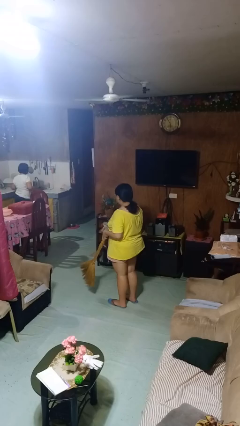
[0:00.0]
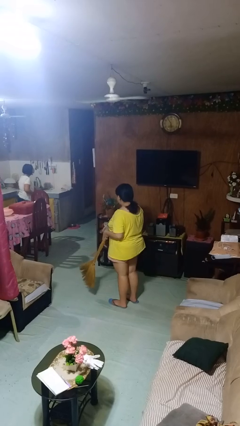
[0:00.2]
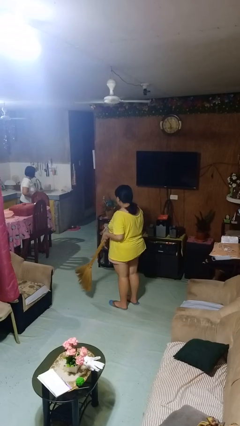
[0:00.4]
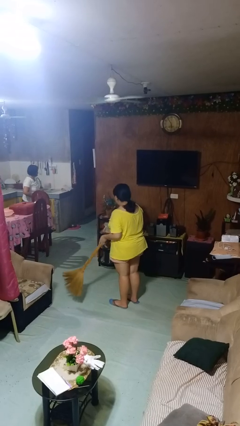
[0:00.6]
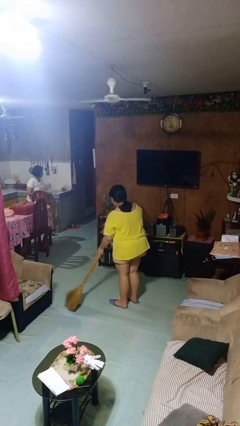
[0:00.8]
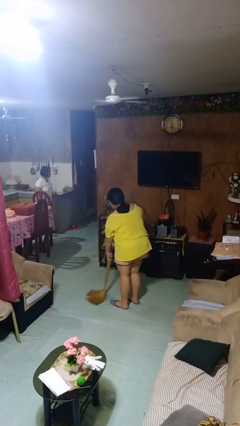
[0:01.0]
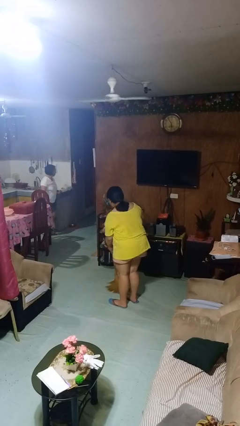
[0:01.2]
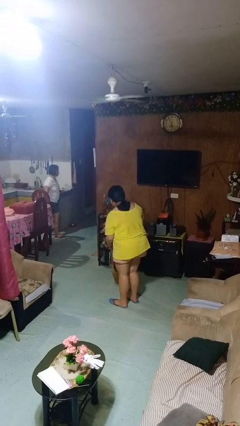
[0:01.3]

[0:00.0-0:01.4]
person sweeps floor

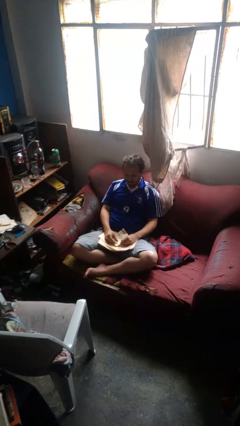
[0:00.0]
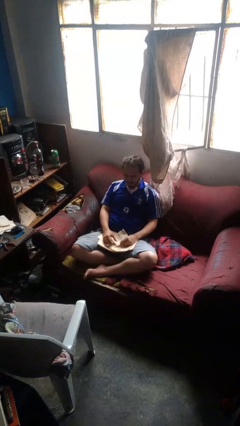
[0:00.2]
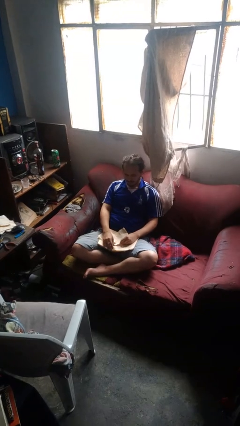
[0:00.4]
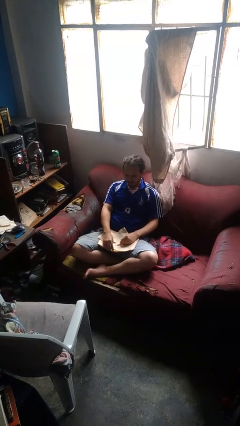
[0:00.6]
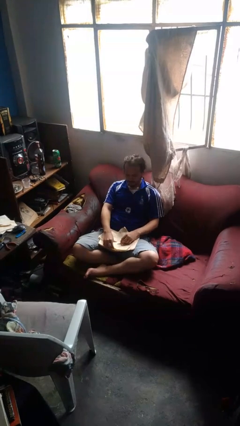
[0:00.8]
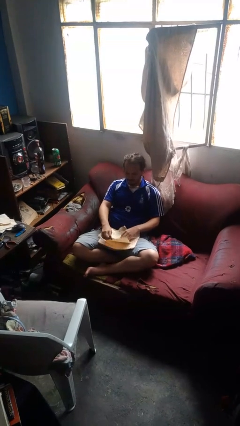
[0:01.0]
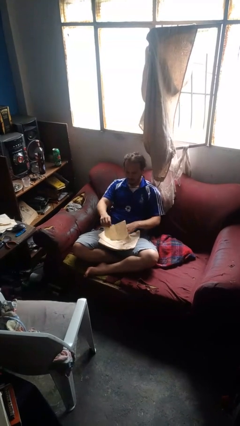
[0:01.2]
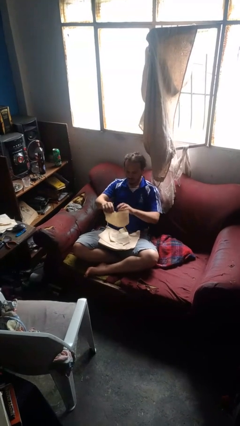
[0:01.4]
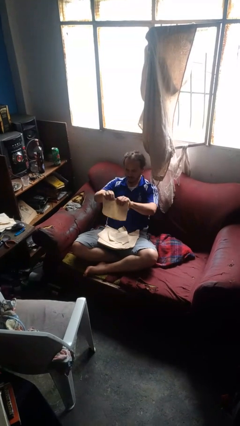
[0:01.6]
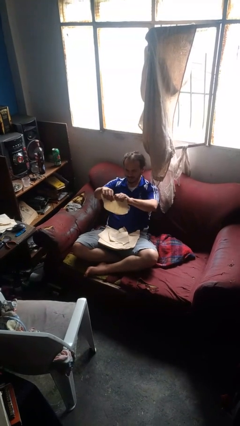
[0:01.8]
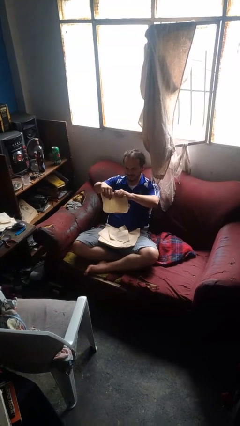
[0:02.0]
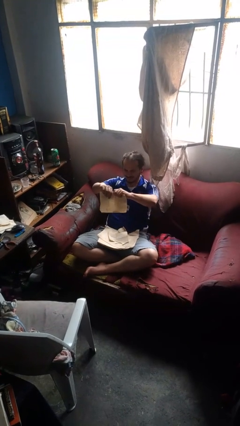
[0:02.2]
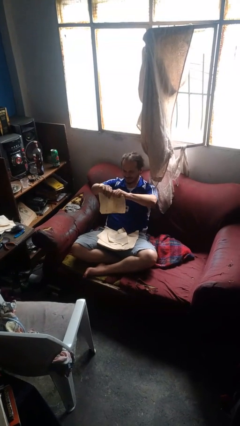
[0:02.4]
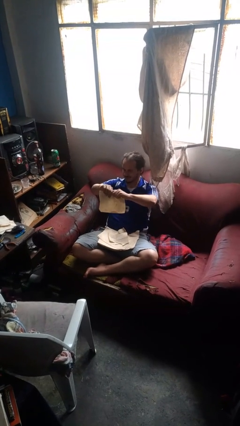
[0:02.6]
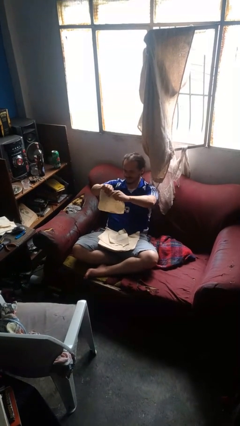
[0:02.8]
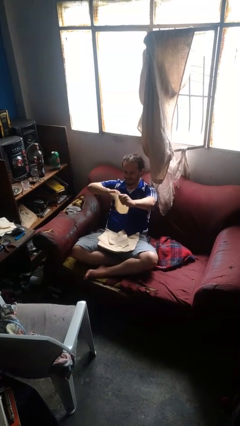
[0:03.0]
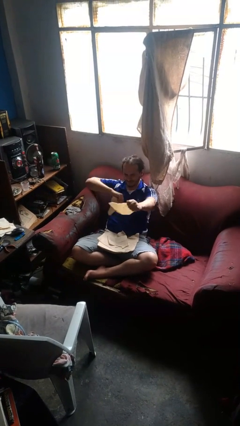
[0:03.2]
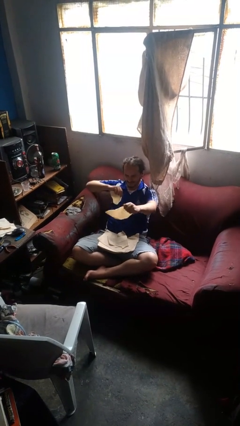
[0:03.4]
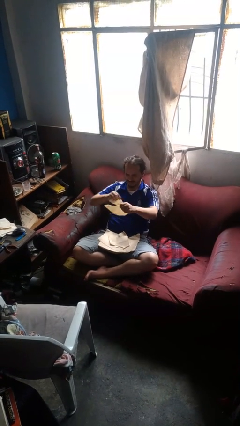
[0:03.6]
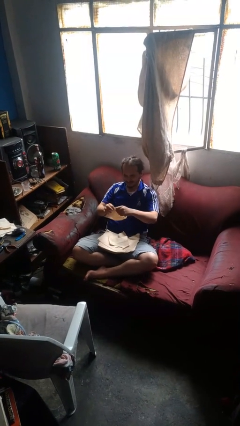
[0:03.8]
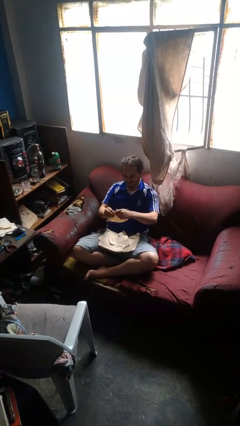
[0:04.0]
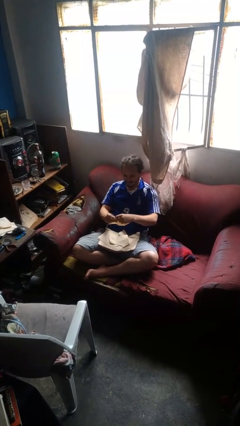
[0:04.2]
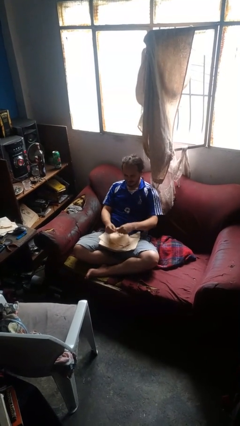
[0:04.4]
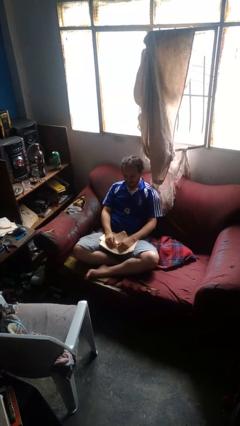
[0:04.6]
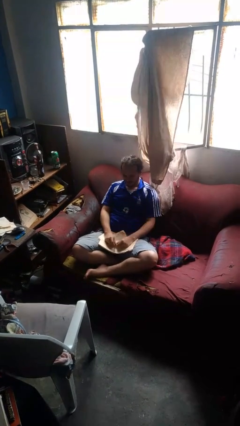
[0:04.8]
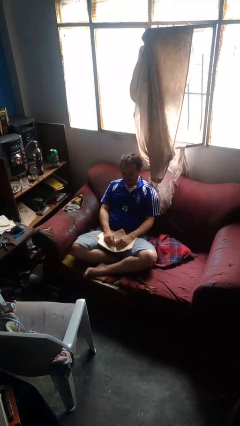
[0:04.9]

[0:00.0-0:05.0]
person tears paper

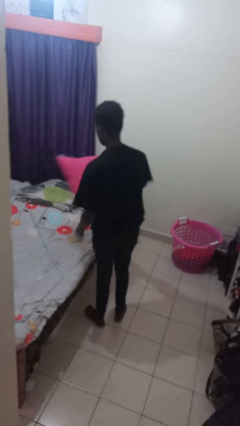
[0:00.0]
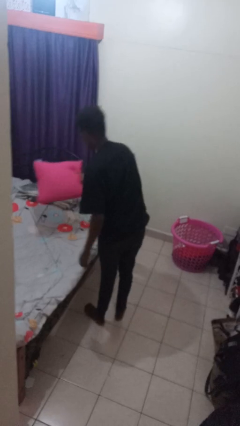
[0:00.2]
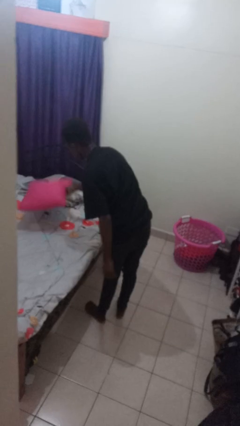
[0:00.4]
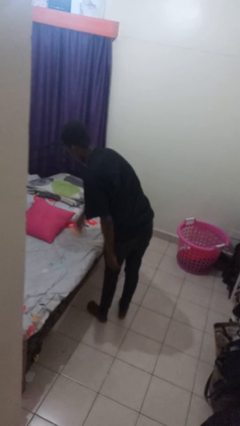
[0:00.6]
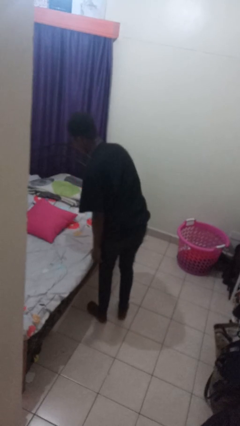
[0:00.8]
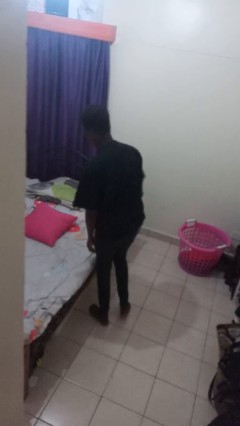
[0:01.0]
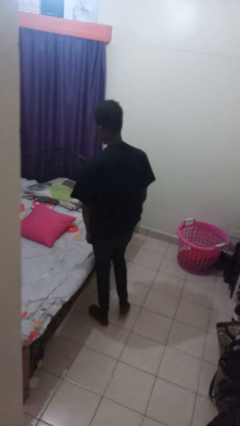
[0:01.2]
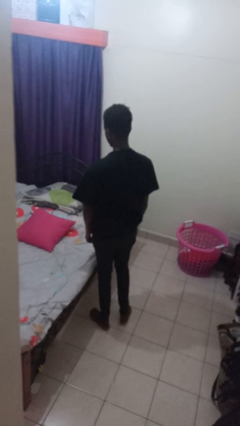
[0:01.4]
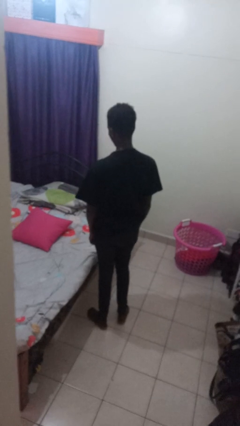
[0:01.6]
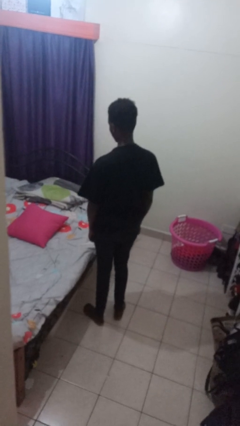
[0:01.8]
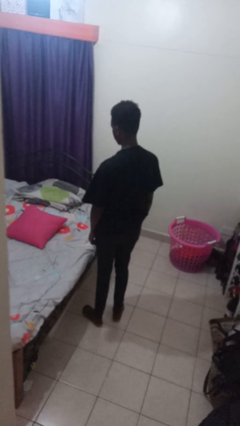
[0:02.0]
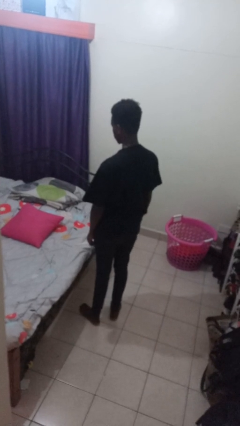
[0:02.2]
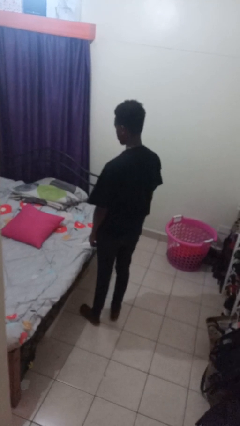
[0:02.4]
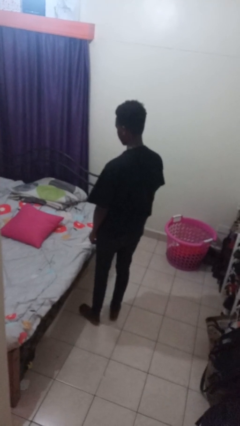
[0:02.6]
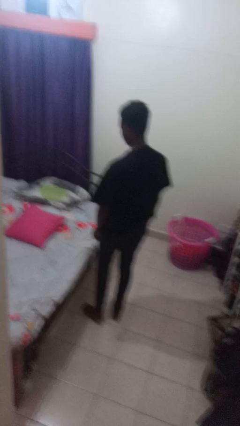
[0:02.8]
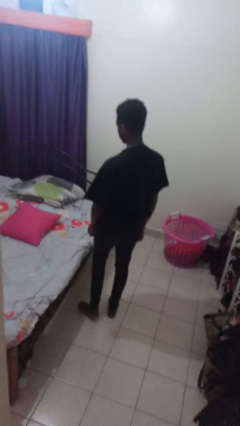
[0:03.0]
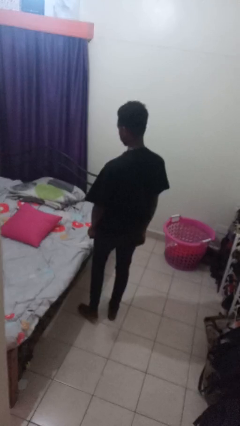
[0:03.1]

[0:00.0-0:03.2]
person puts down object on bed

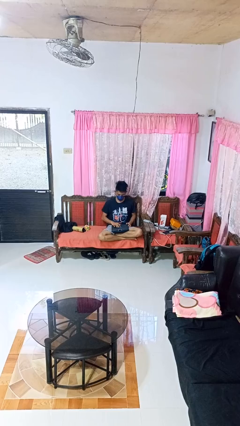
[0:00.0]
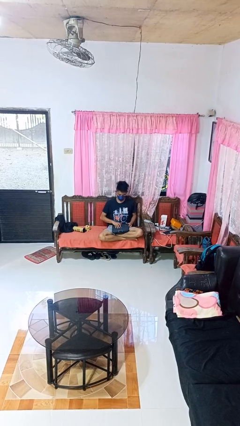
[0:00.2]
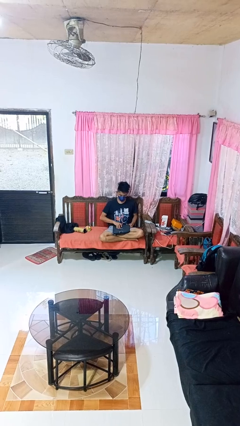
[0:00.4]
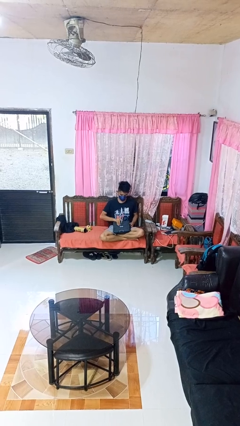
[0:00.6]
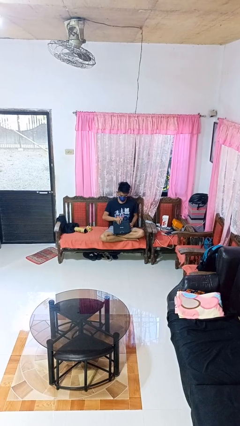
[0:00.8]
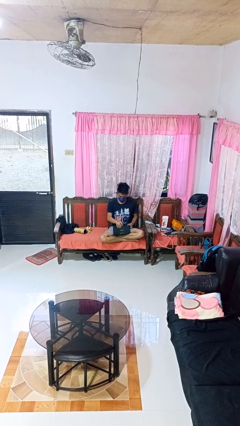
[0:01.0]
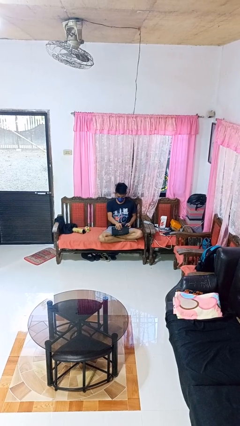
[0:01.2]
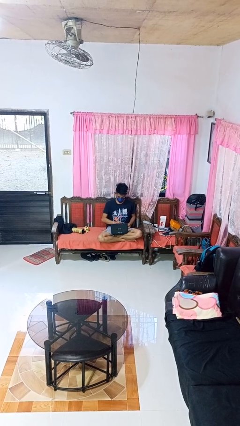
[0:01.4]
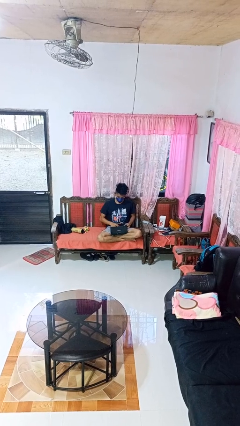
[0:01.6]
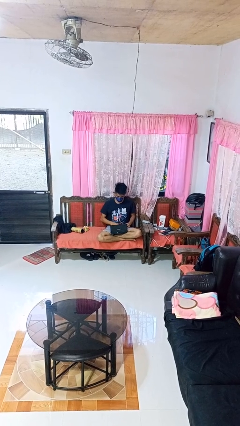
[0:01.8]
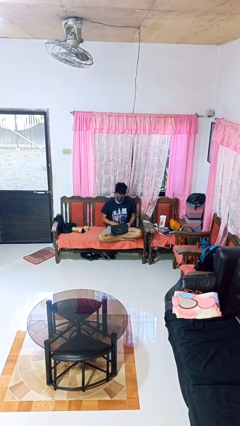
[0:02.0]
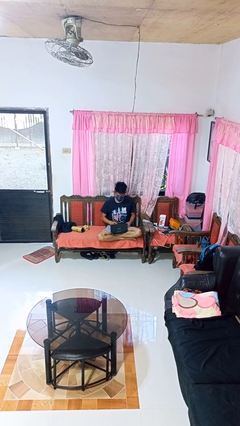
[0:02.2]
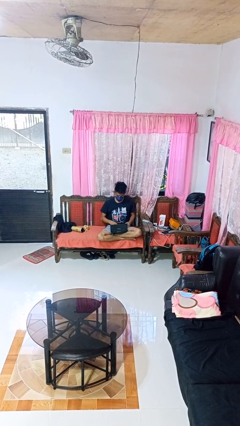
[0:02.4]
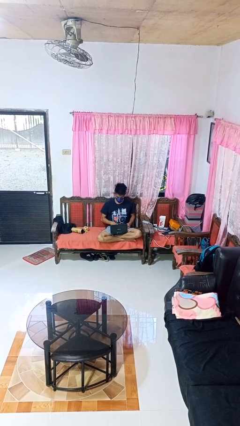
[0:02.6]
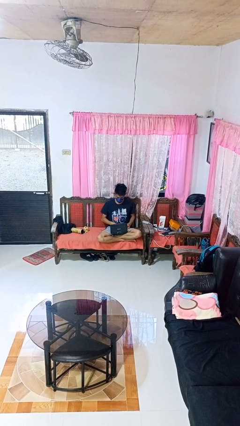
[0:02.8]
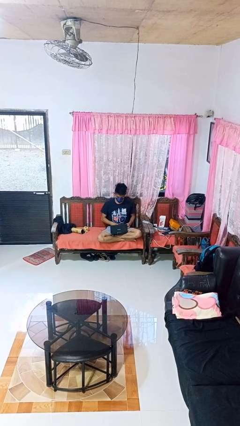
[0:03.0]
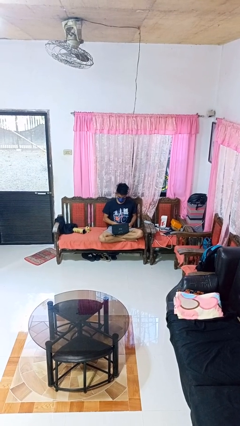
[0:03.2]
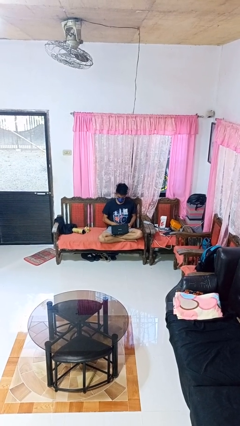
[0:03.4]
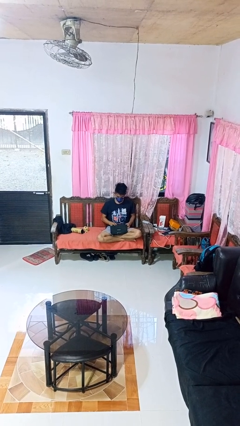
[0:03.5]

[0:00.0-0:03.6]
person opens laptop

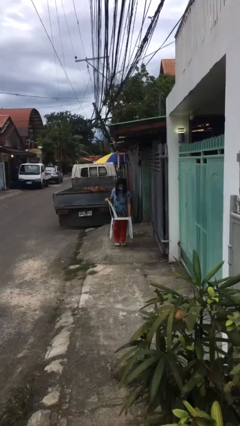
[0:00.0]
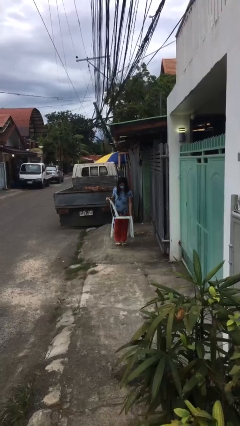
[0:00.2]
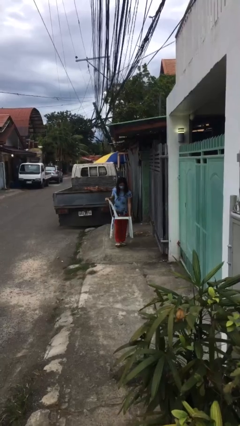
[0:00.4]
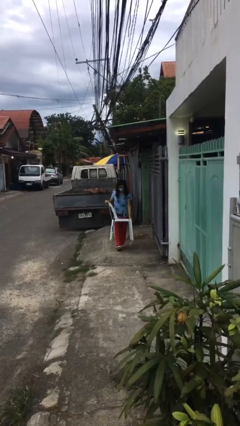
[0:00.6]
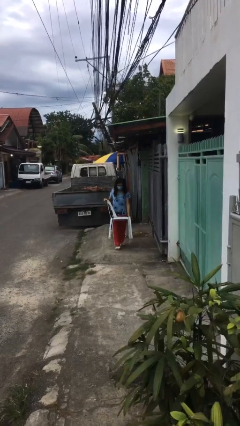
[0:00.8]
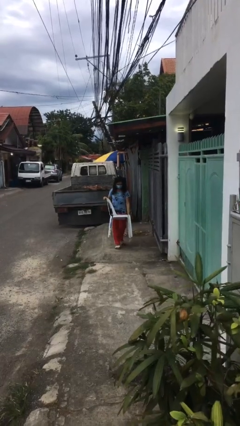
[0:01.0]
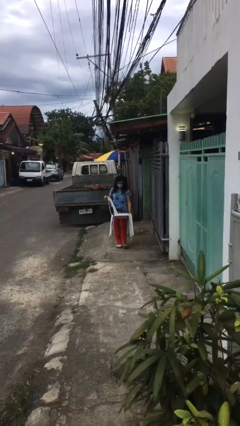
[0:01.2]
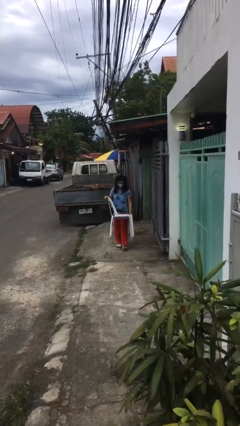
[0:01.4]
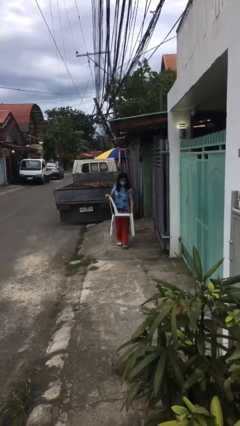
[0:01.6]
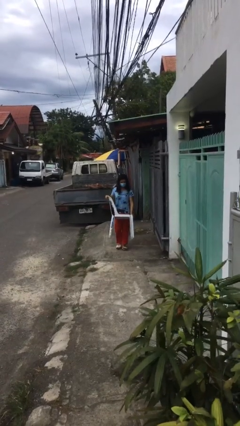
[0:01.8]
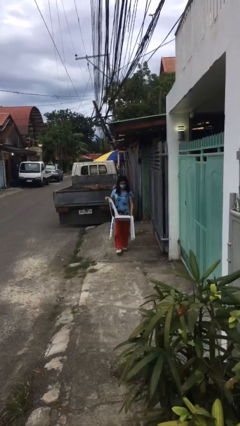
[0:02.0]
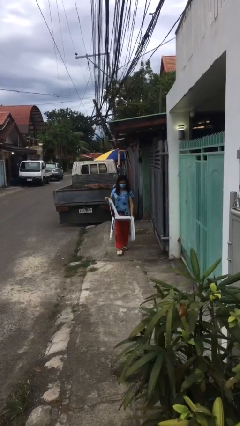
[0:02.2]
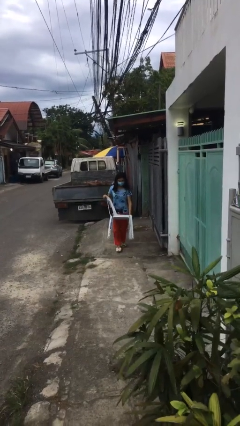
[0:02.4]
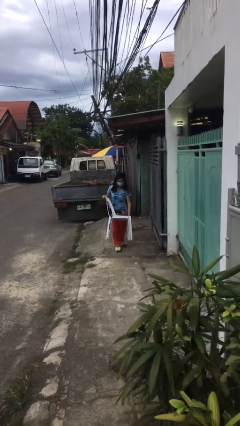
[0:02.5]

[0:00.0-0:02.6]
person carries heavy object

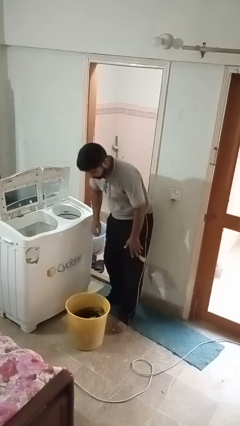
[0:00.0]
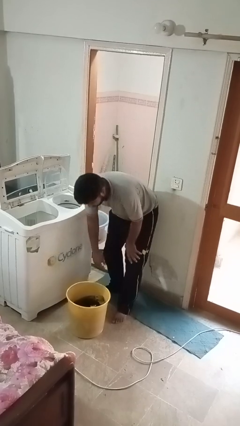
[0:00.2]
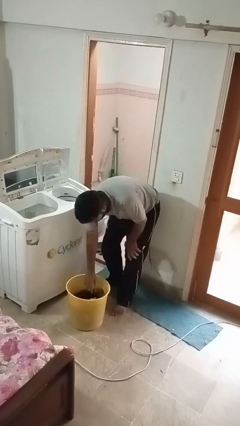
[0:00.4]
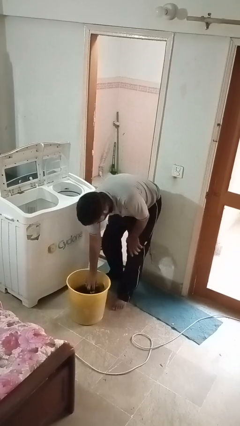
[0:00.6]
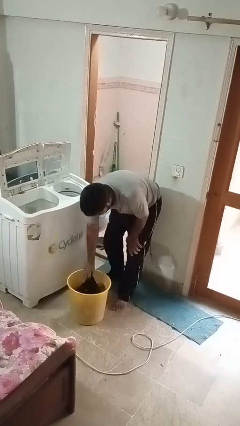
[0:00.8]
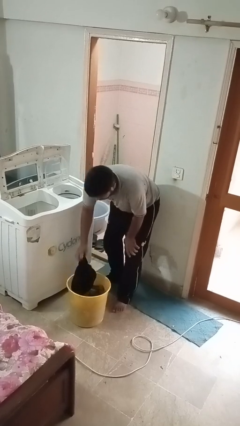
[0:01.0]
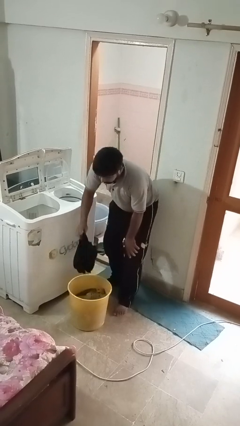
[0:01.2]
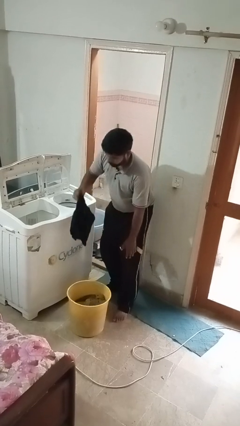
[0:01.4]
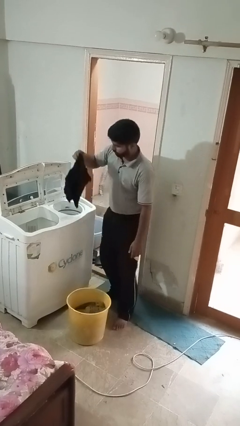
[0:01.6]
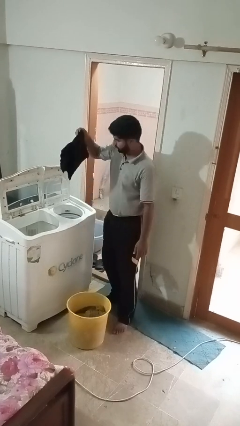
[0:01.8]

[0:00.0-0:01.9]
person loads dryer

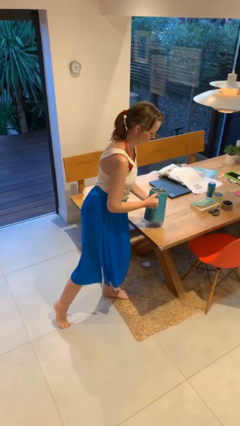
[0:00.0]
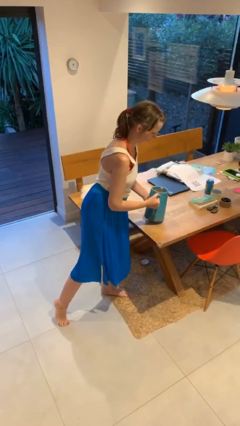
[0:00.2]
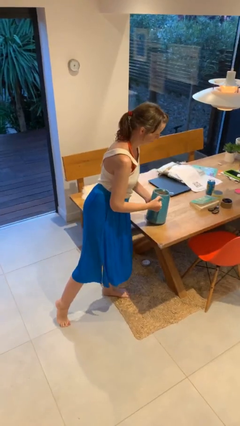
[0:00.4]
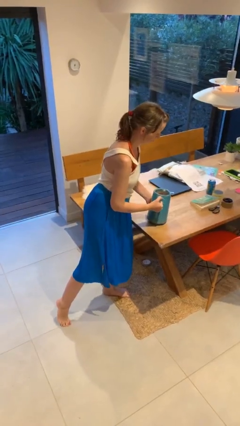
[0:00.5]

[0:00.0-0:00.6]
person puts down object on table
